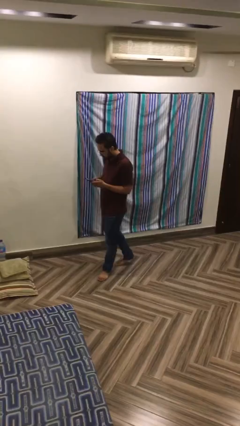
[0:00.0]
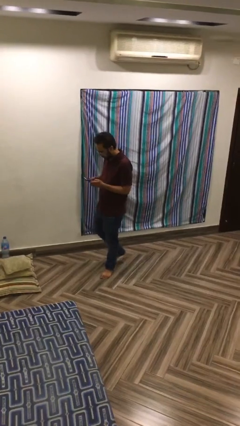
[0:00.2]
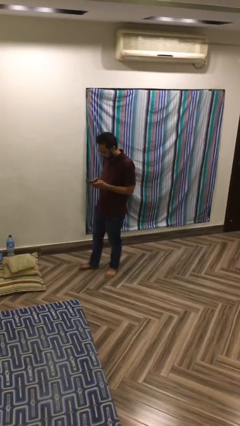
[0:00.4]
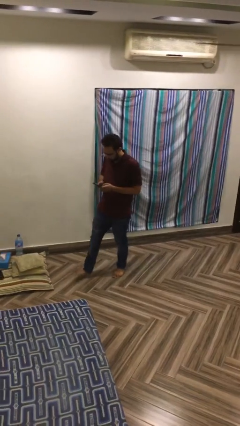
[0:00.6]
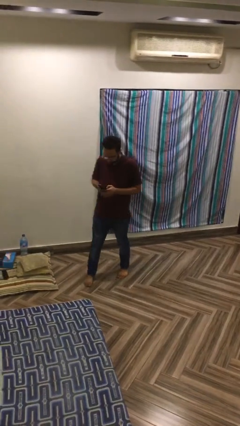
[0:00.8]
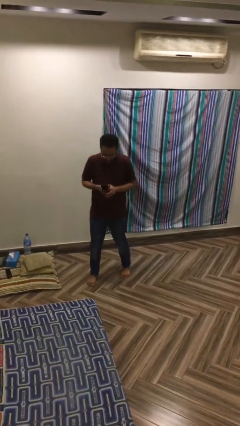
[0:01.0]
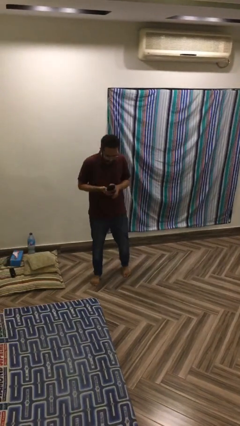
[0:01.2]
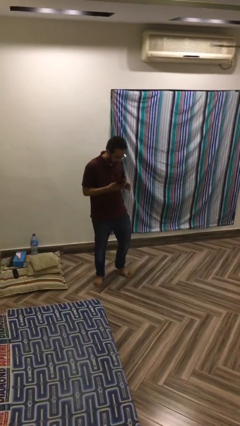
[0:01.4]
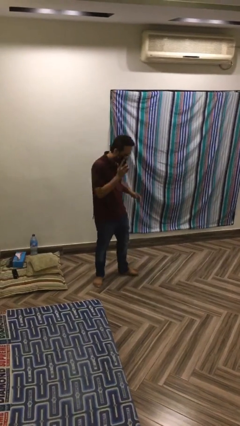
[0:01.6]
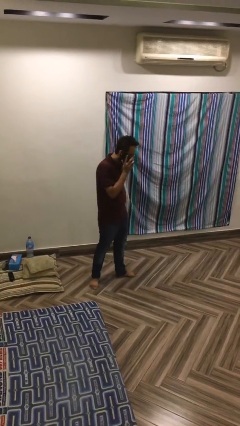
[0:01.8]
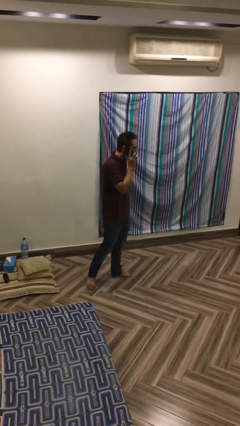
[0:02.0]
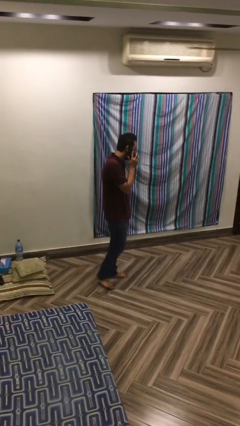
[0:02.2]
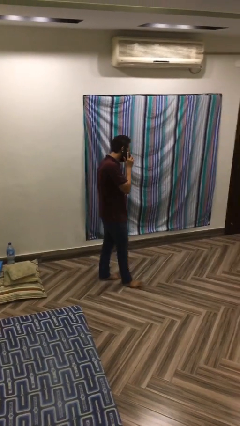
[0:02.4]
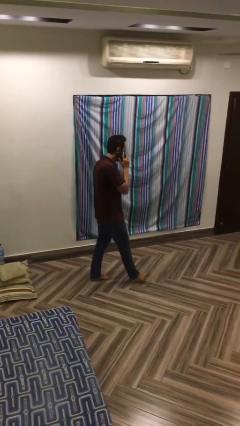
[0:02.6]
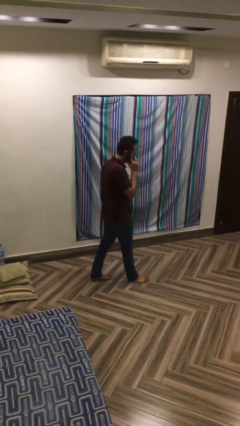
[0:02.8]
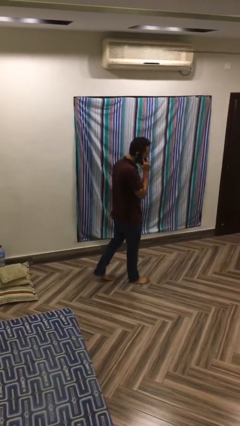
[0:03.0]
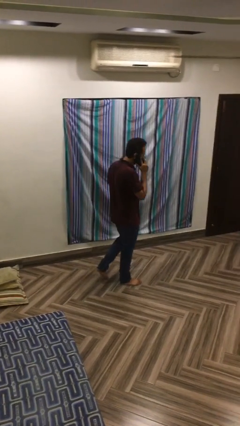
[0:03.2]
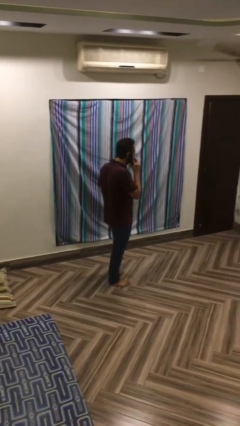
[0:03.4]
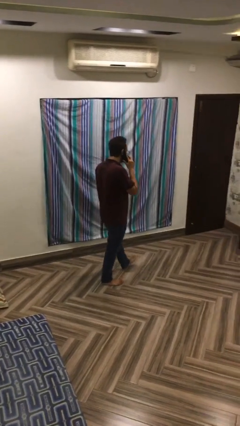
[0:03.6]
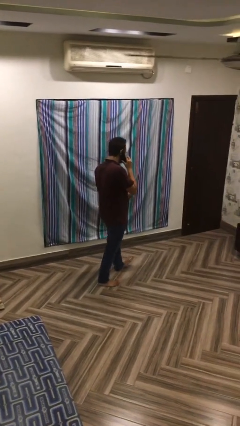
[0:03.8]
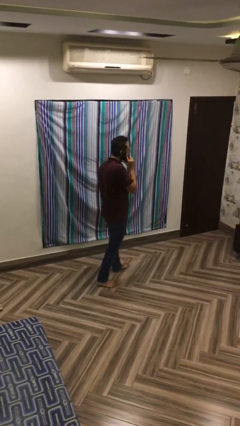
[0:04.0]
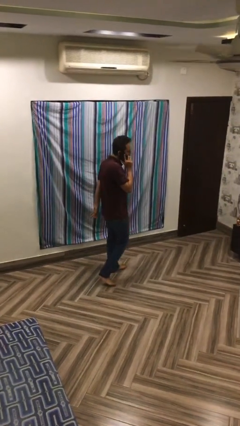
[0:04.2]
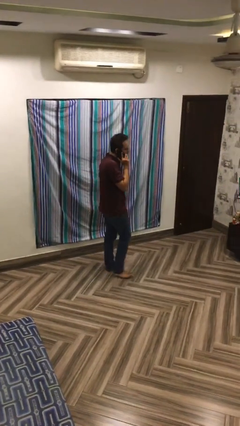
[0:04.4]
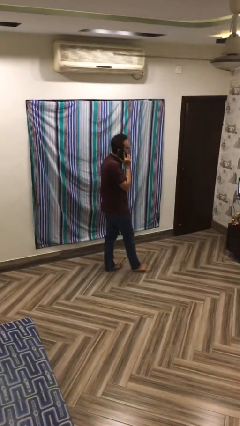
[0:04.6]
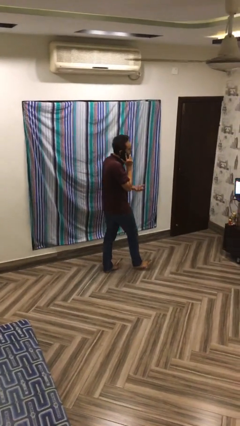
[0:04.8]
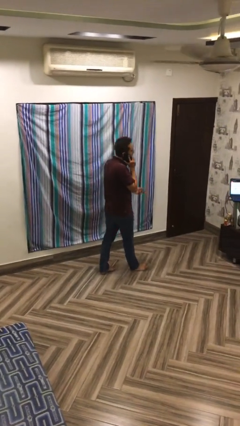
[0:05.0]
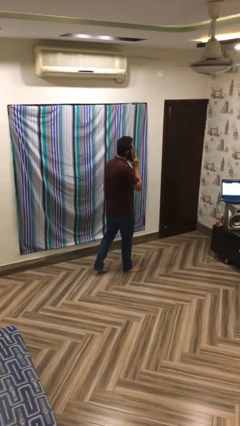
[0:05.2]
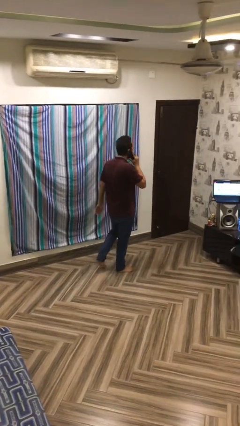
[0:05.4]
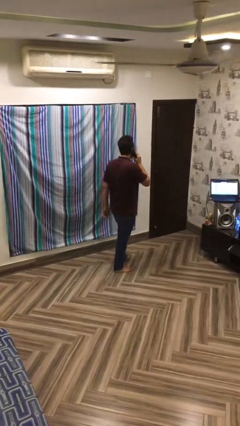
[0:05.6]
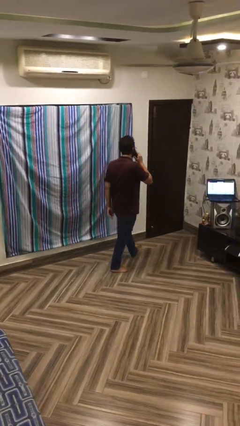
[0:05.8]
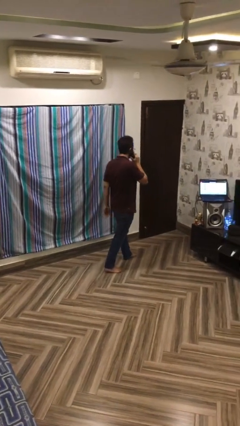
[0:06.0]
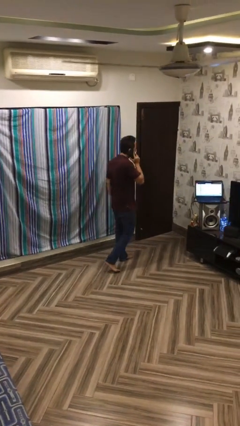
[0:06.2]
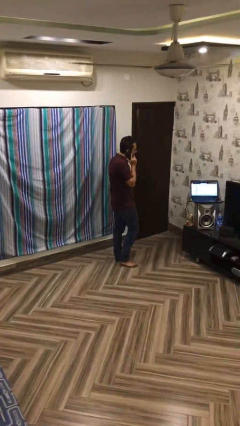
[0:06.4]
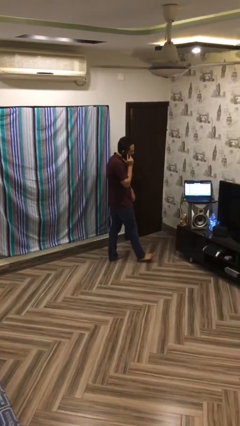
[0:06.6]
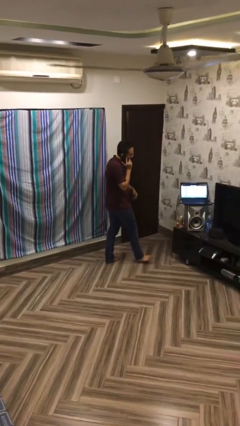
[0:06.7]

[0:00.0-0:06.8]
person talks on phone

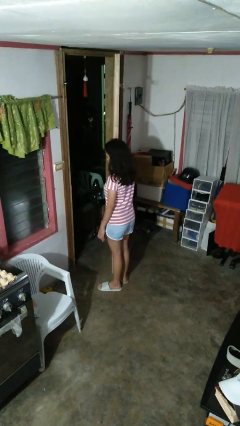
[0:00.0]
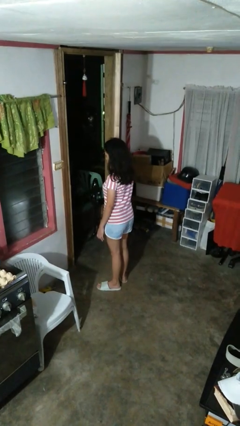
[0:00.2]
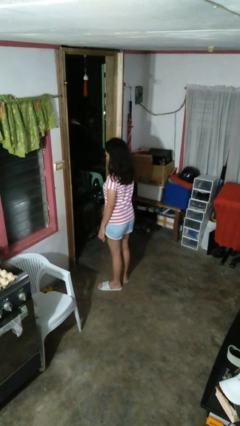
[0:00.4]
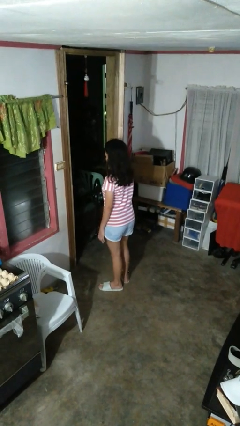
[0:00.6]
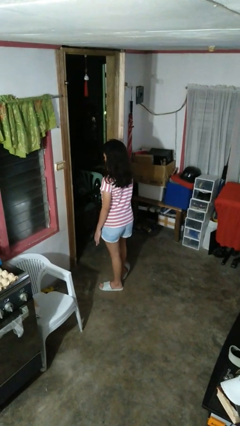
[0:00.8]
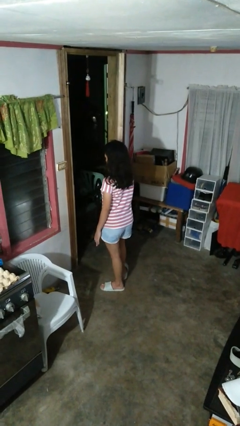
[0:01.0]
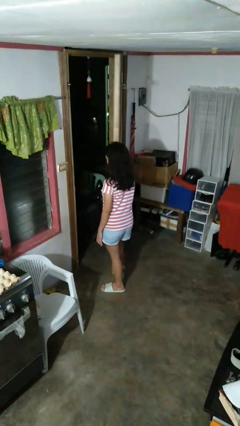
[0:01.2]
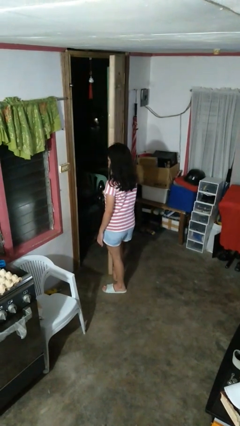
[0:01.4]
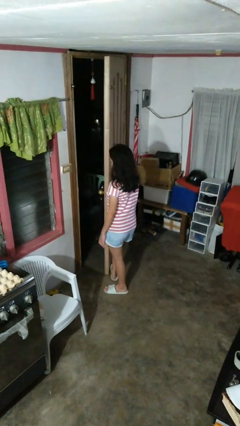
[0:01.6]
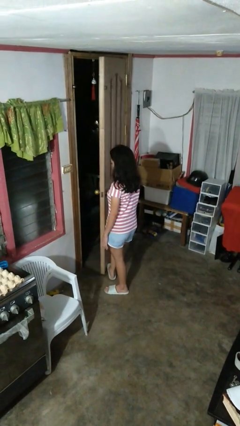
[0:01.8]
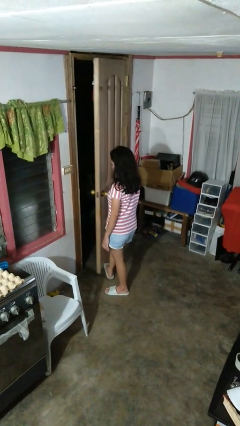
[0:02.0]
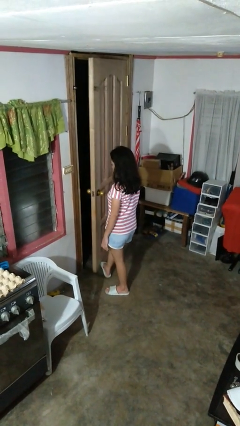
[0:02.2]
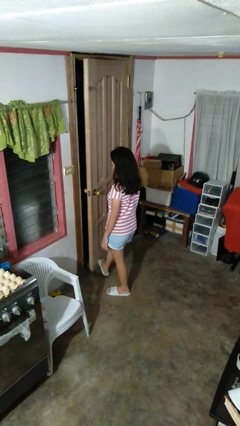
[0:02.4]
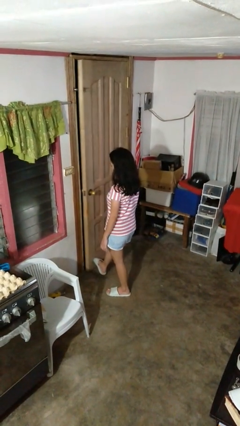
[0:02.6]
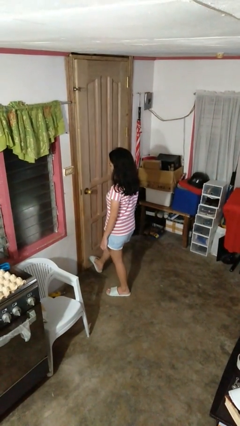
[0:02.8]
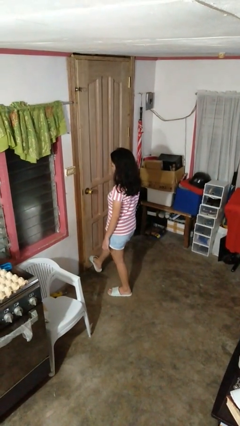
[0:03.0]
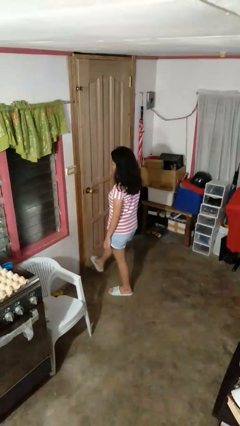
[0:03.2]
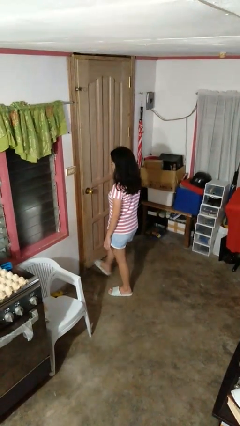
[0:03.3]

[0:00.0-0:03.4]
person closes door with foot

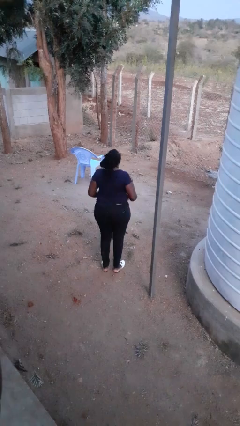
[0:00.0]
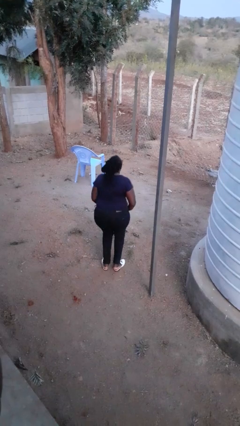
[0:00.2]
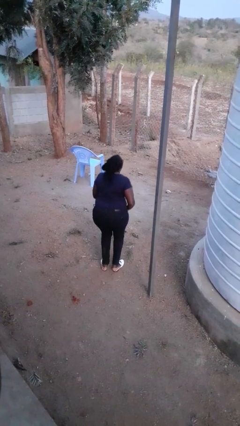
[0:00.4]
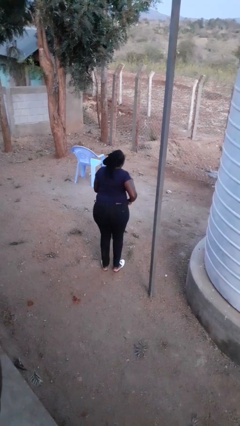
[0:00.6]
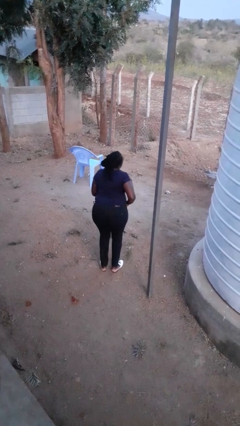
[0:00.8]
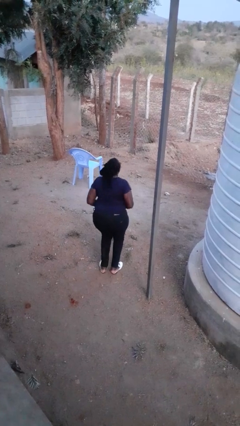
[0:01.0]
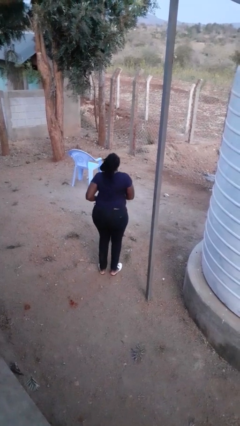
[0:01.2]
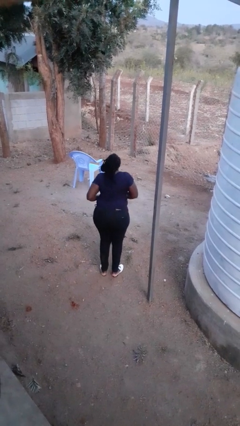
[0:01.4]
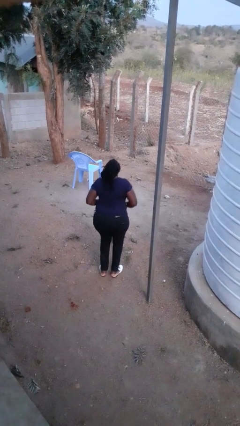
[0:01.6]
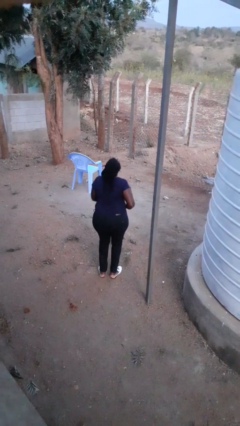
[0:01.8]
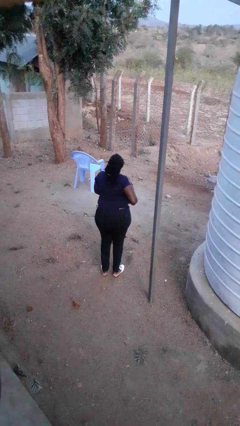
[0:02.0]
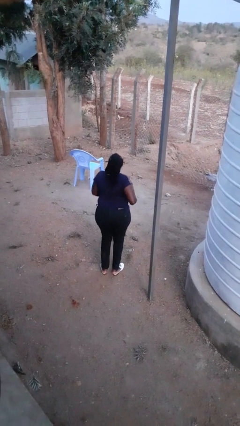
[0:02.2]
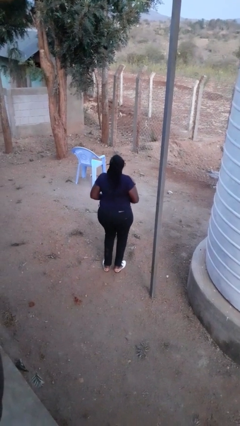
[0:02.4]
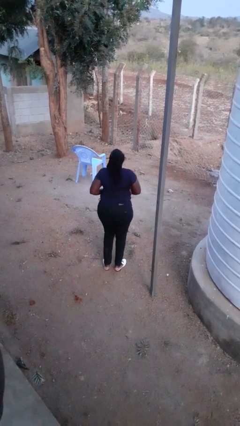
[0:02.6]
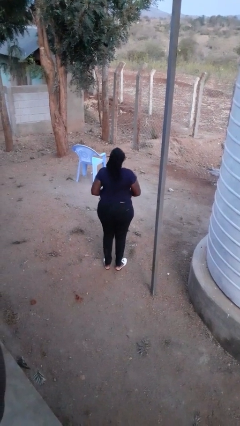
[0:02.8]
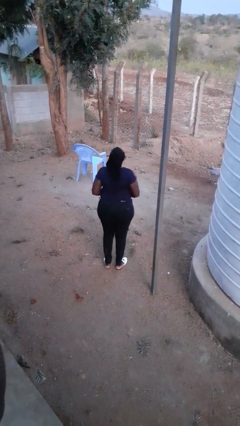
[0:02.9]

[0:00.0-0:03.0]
person dances in place

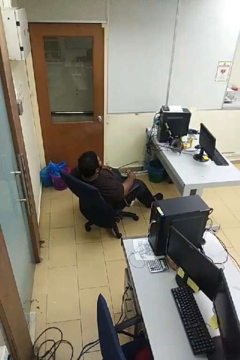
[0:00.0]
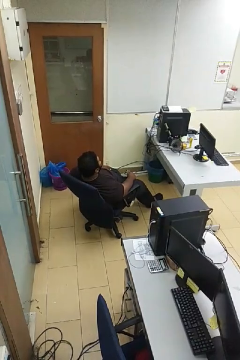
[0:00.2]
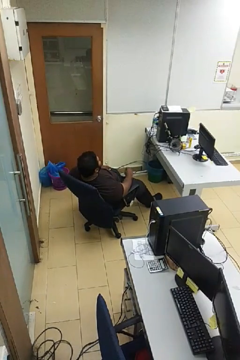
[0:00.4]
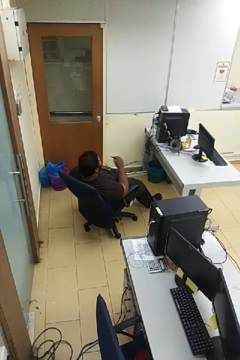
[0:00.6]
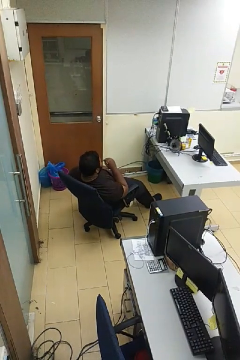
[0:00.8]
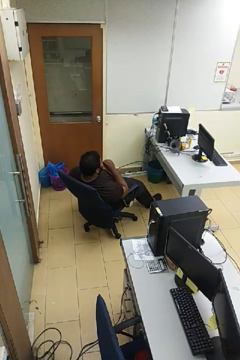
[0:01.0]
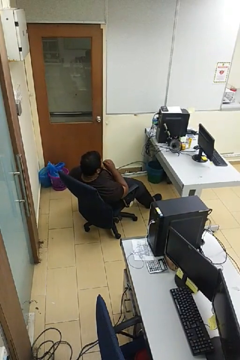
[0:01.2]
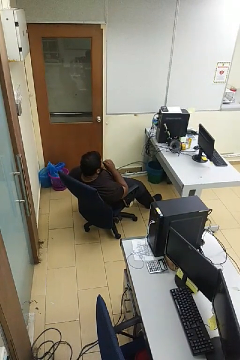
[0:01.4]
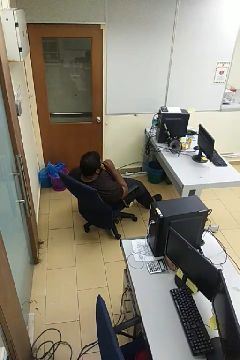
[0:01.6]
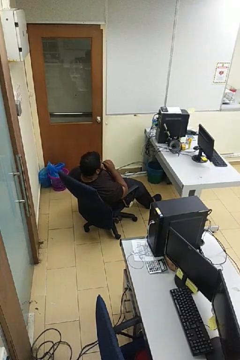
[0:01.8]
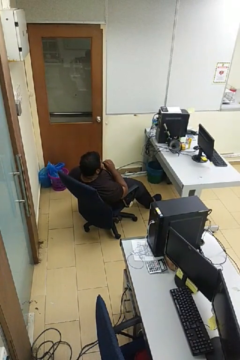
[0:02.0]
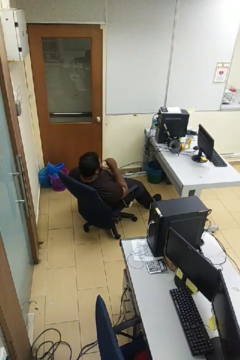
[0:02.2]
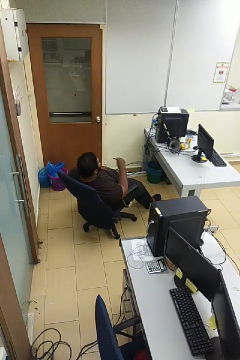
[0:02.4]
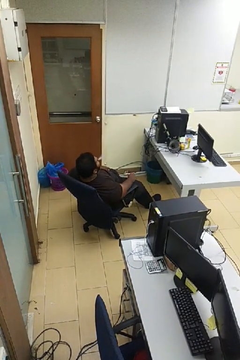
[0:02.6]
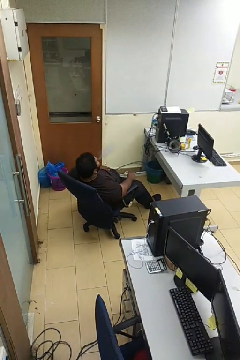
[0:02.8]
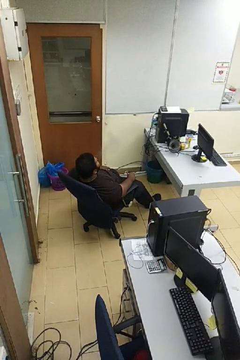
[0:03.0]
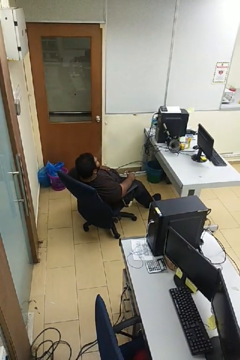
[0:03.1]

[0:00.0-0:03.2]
person vapes

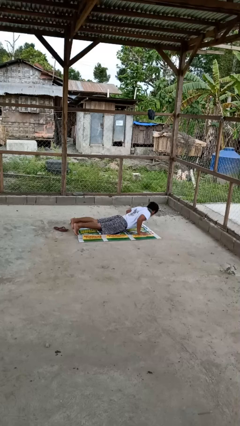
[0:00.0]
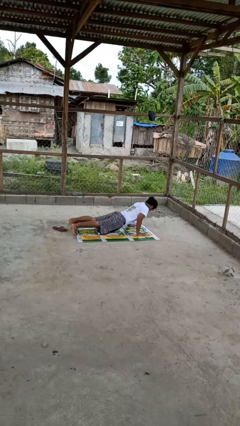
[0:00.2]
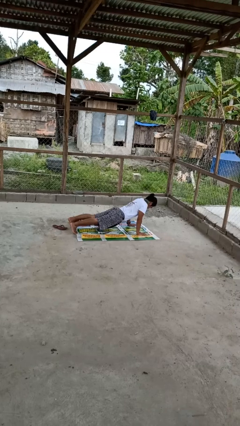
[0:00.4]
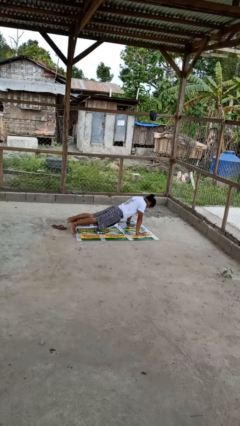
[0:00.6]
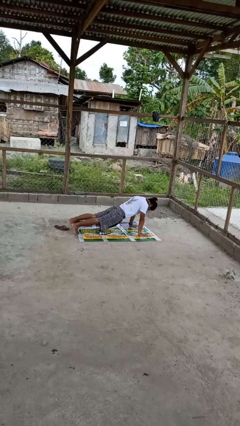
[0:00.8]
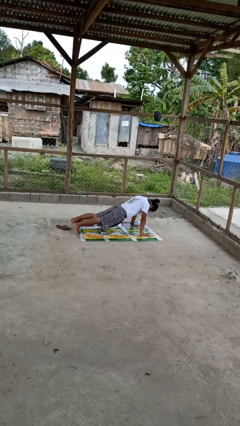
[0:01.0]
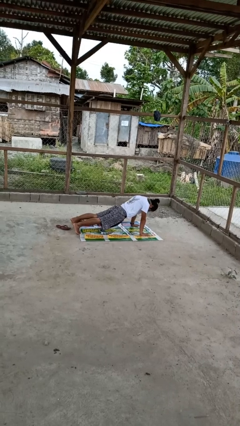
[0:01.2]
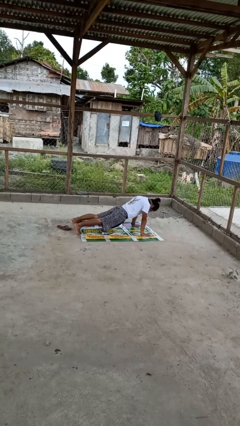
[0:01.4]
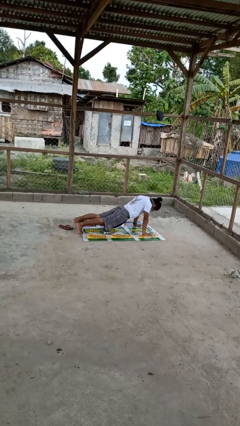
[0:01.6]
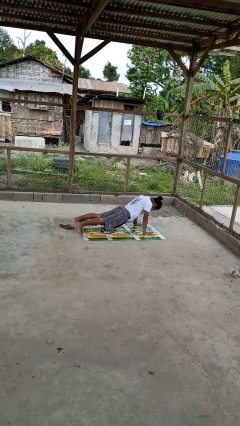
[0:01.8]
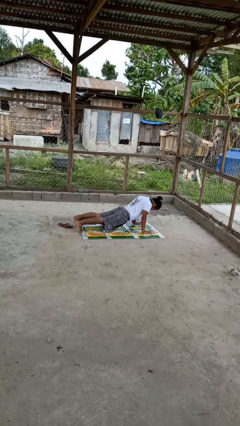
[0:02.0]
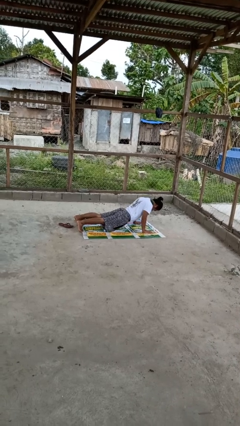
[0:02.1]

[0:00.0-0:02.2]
person exercises with pushup
